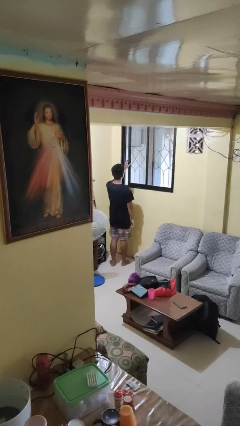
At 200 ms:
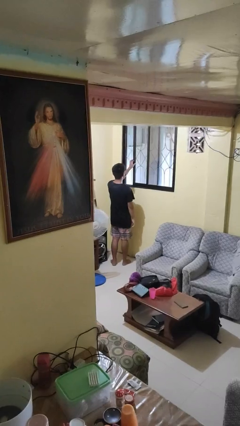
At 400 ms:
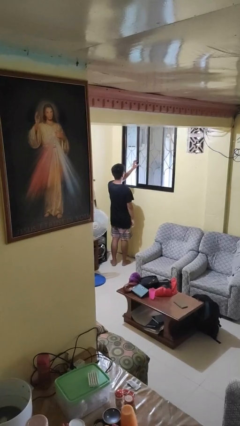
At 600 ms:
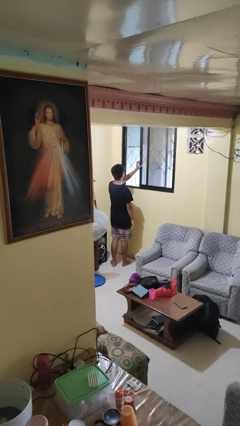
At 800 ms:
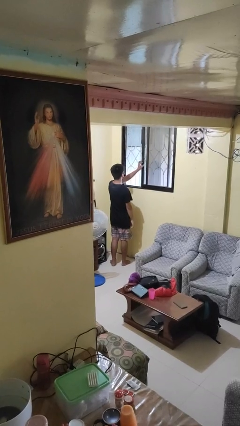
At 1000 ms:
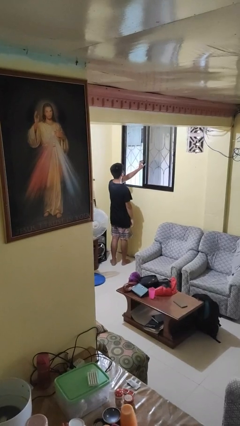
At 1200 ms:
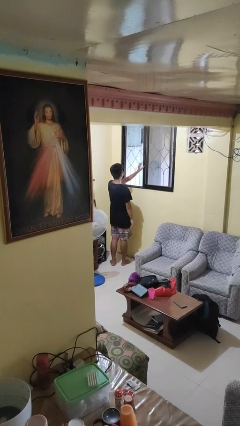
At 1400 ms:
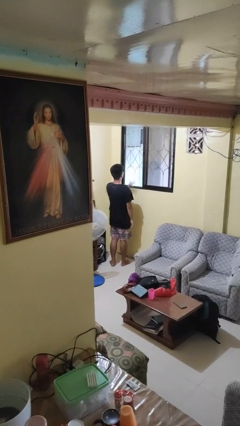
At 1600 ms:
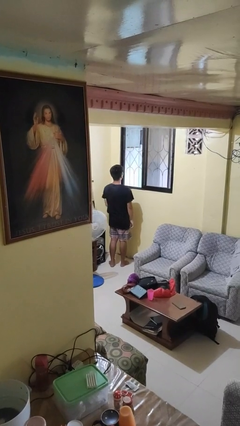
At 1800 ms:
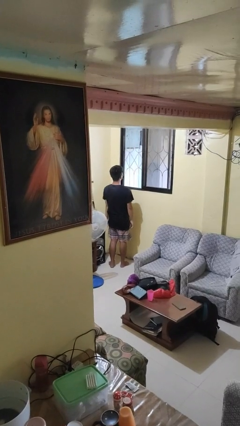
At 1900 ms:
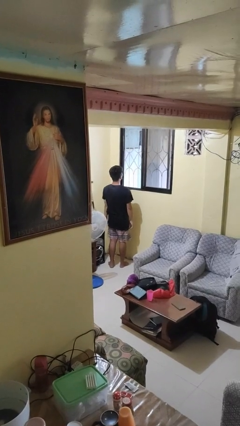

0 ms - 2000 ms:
person opens home window

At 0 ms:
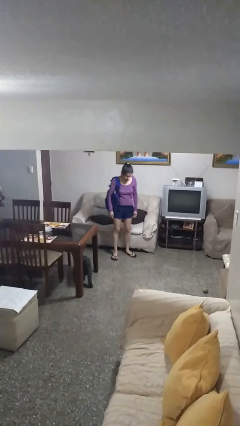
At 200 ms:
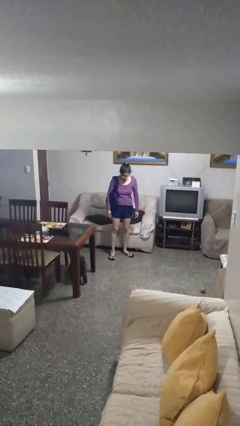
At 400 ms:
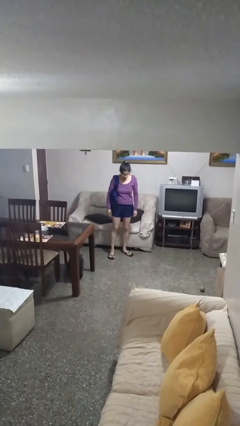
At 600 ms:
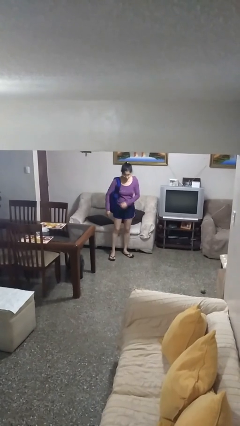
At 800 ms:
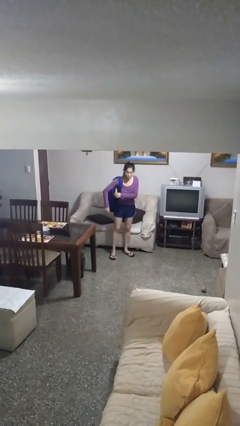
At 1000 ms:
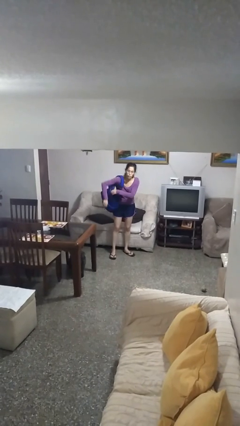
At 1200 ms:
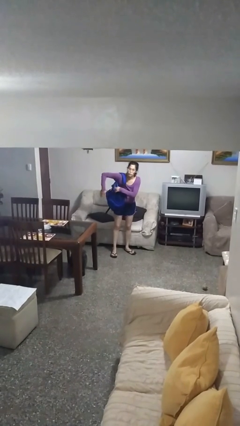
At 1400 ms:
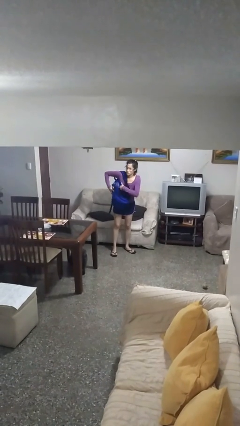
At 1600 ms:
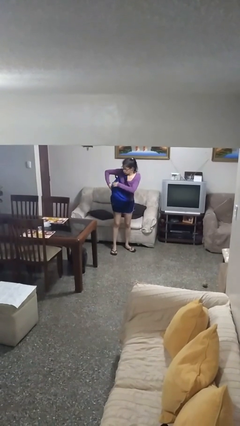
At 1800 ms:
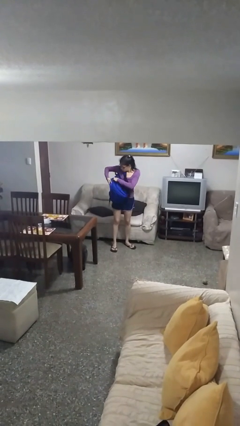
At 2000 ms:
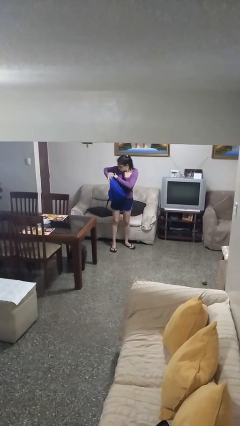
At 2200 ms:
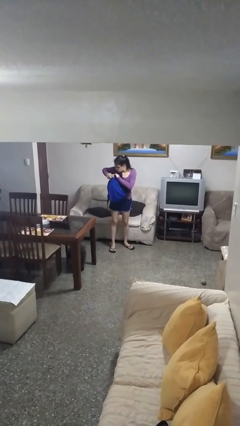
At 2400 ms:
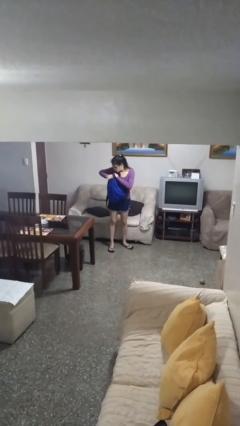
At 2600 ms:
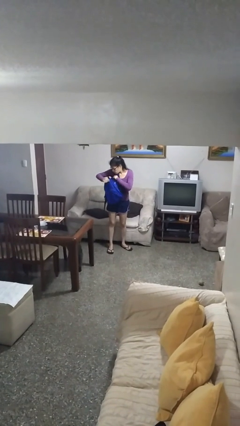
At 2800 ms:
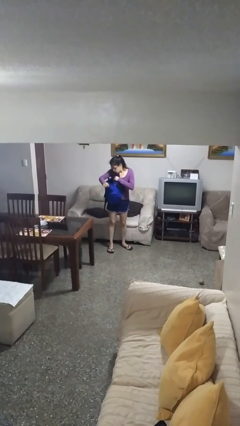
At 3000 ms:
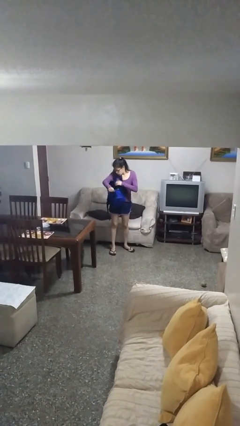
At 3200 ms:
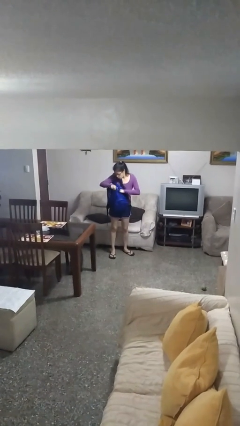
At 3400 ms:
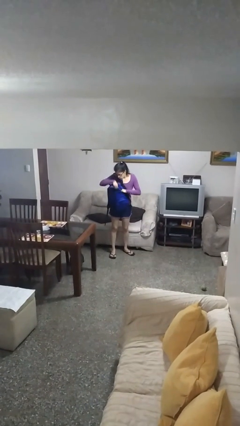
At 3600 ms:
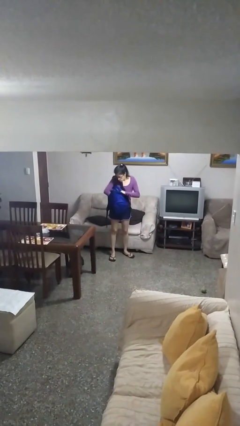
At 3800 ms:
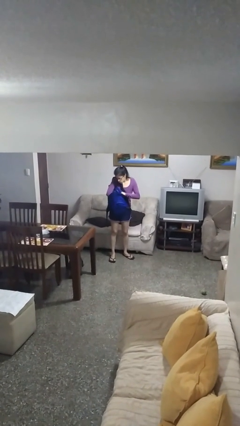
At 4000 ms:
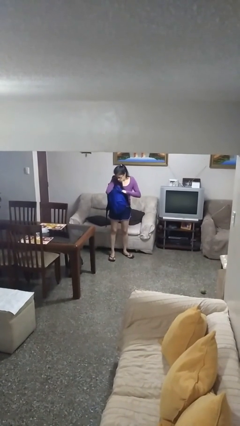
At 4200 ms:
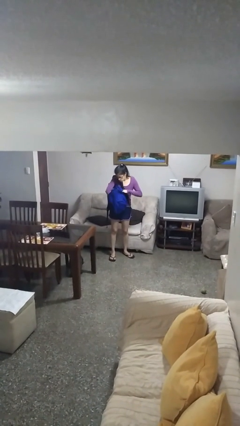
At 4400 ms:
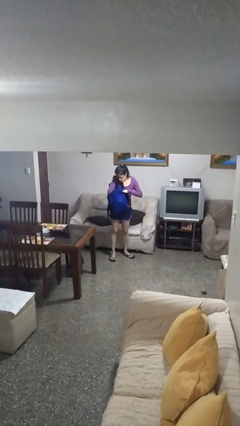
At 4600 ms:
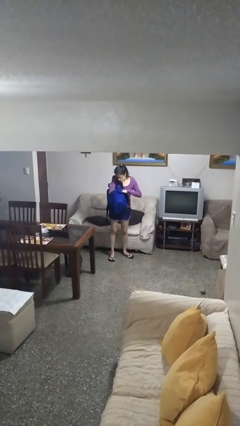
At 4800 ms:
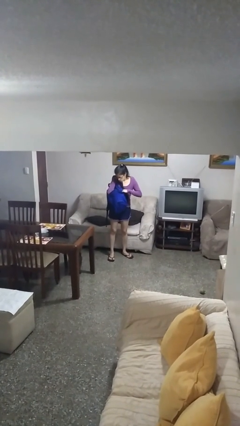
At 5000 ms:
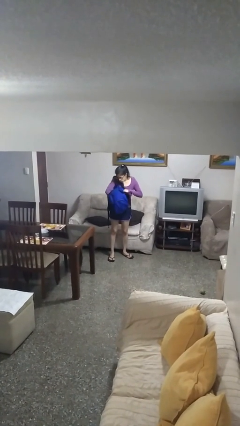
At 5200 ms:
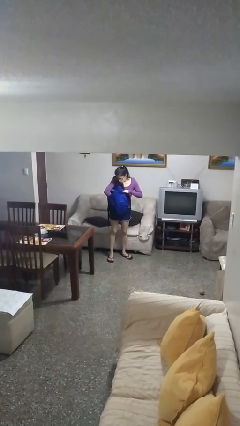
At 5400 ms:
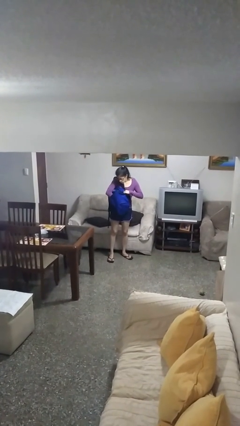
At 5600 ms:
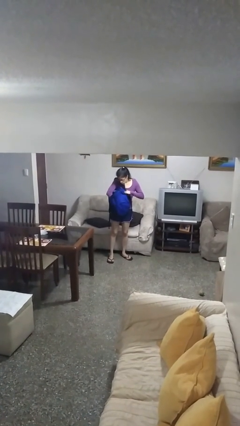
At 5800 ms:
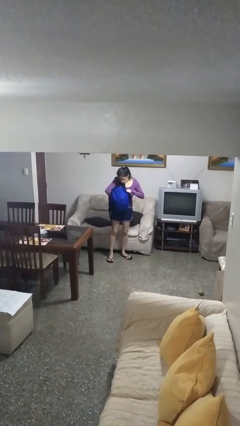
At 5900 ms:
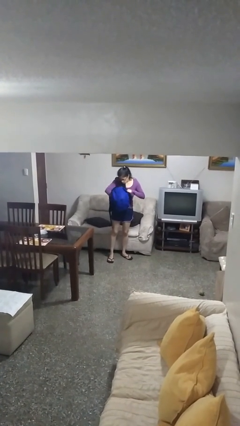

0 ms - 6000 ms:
person searches in backpack

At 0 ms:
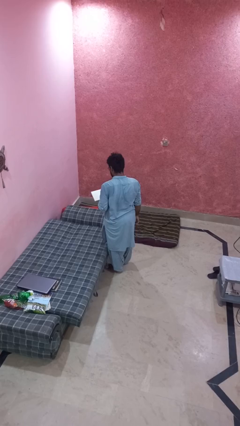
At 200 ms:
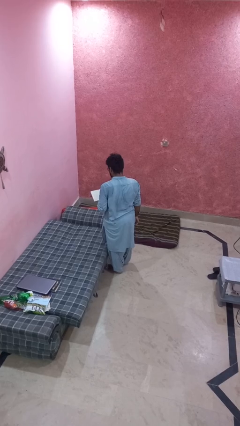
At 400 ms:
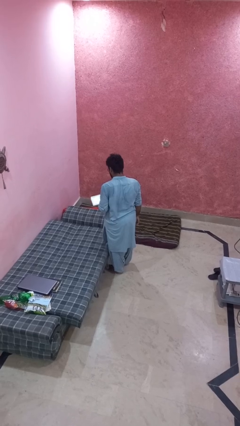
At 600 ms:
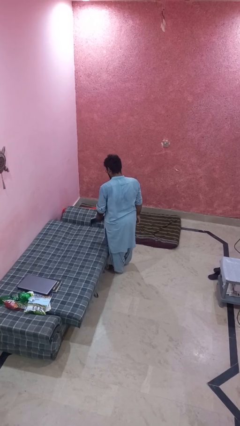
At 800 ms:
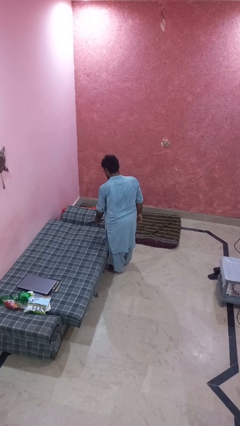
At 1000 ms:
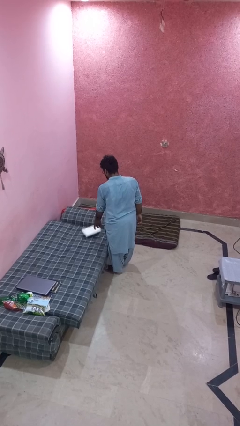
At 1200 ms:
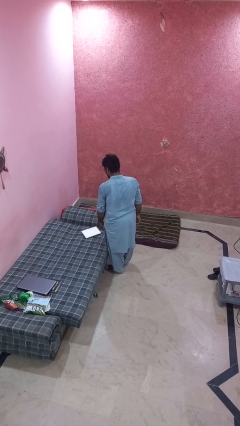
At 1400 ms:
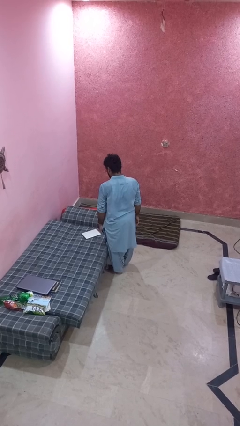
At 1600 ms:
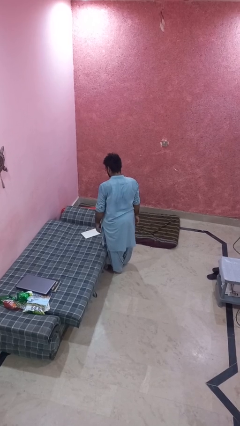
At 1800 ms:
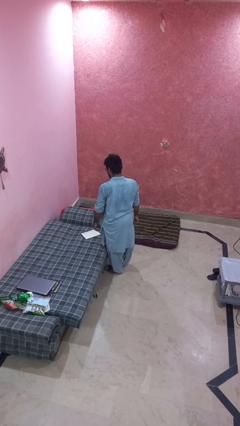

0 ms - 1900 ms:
person puts down object on bed

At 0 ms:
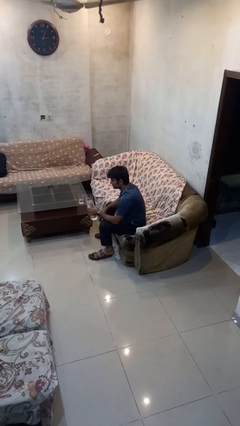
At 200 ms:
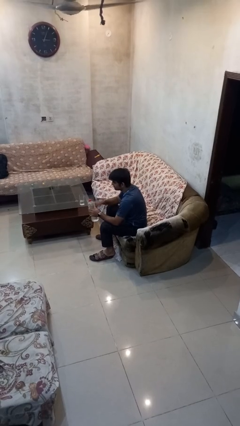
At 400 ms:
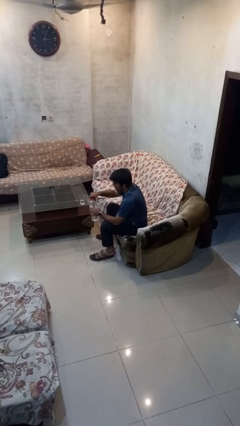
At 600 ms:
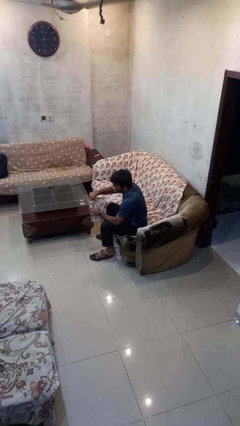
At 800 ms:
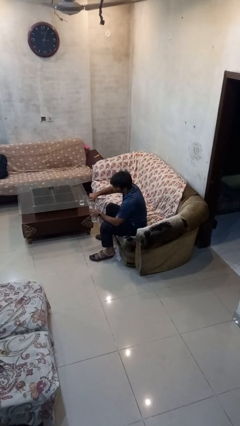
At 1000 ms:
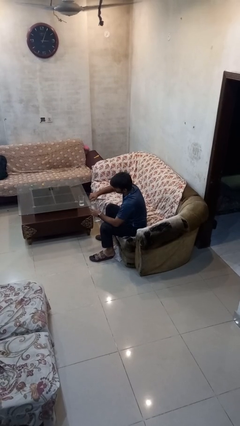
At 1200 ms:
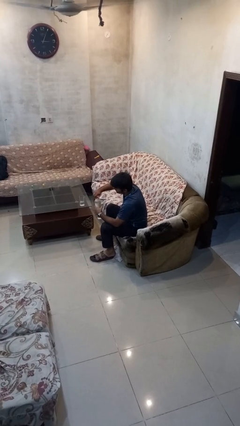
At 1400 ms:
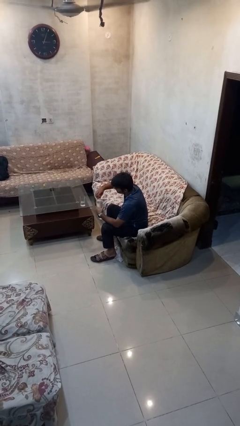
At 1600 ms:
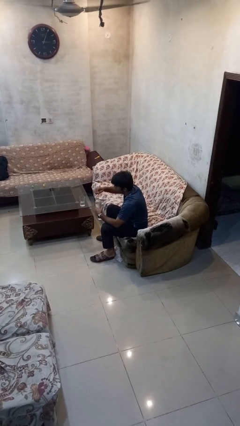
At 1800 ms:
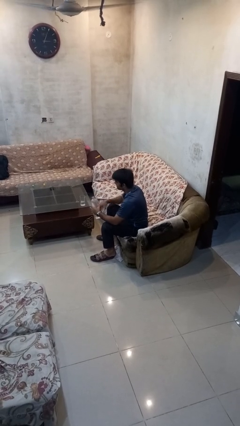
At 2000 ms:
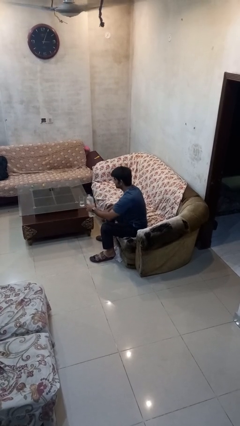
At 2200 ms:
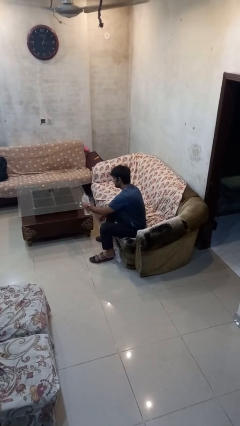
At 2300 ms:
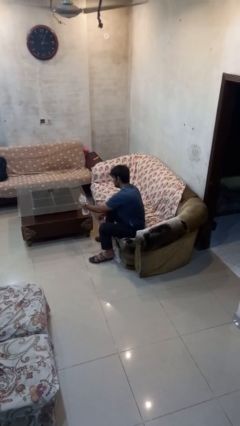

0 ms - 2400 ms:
person unscrews lid from bottle

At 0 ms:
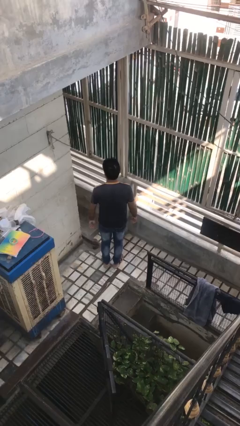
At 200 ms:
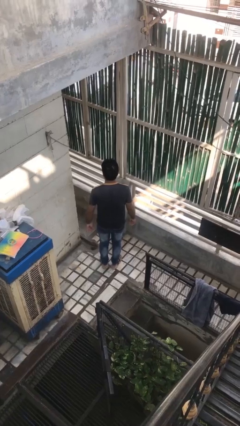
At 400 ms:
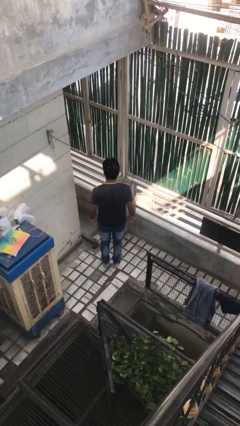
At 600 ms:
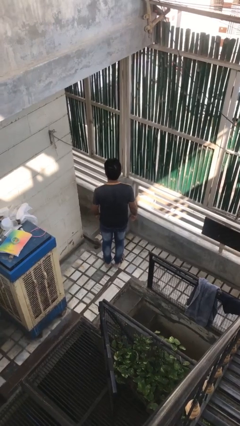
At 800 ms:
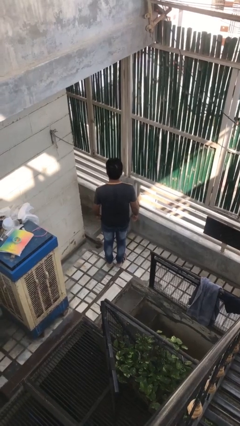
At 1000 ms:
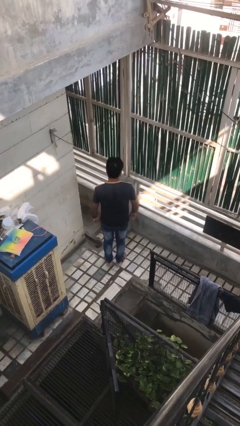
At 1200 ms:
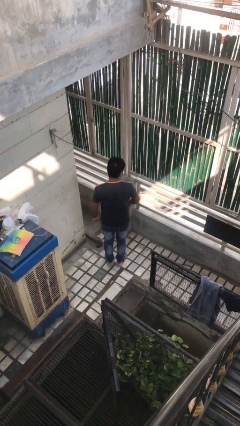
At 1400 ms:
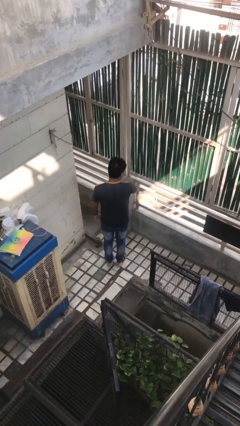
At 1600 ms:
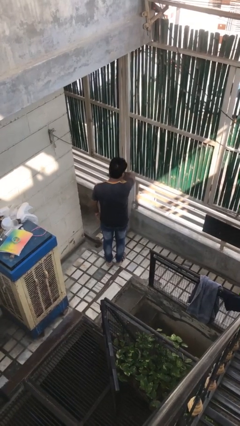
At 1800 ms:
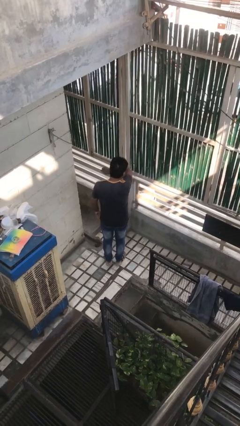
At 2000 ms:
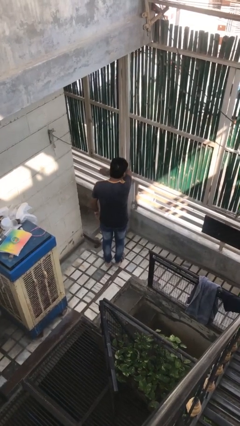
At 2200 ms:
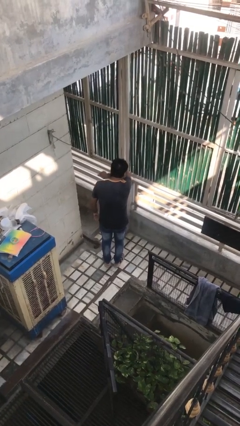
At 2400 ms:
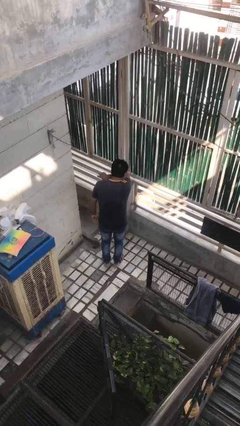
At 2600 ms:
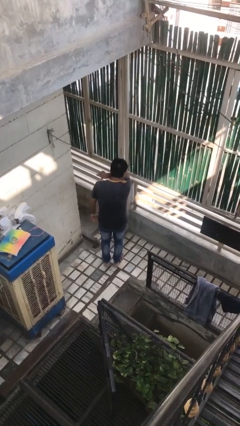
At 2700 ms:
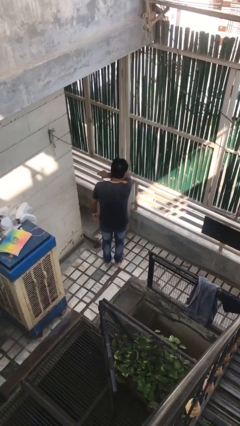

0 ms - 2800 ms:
person sneezes into arm

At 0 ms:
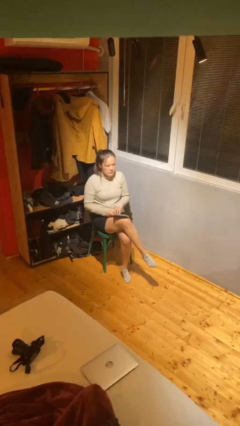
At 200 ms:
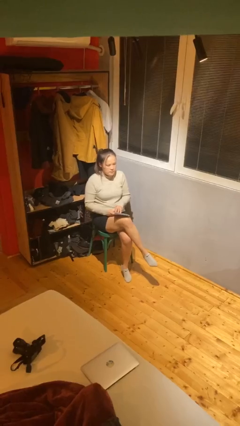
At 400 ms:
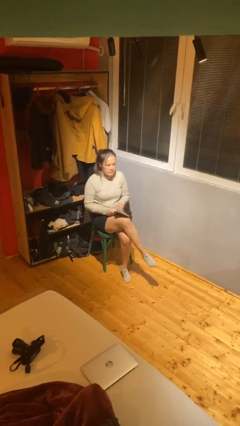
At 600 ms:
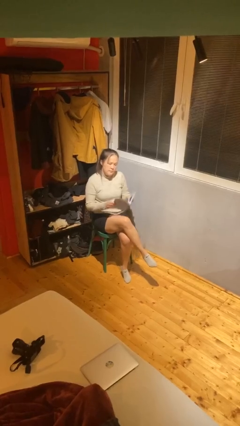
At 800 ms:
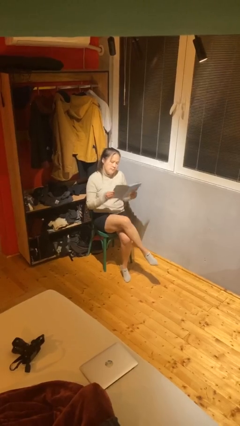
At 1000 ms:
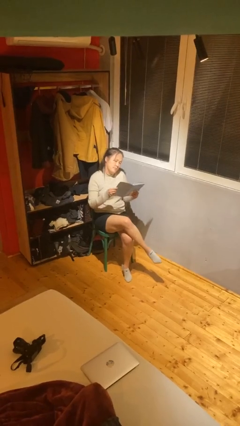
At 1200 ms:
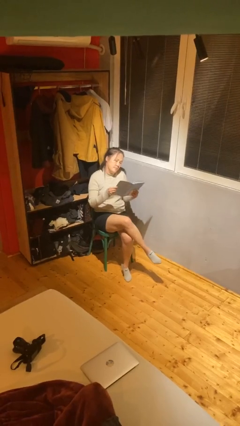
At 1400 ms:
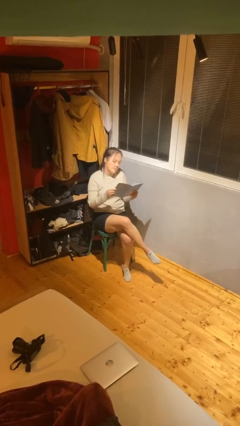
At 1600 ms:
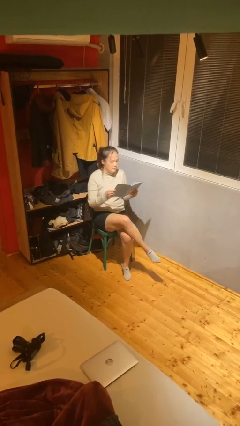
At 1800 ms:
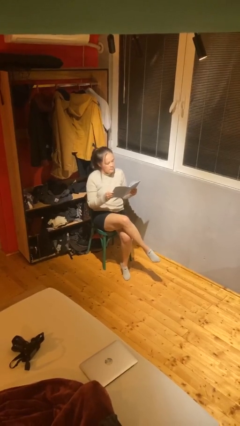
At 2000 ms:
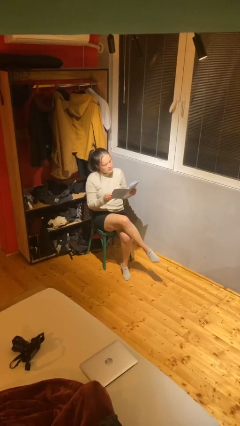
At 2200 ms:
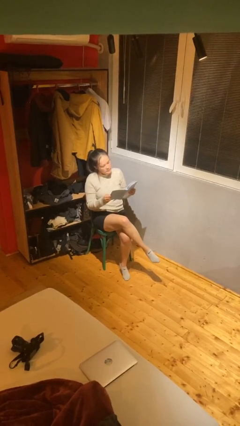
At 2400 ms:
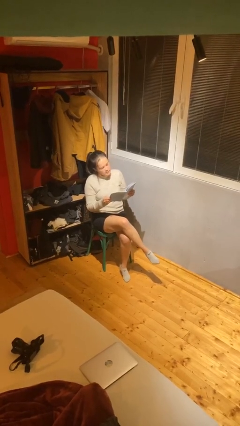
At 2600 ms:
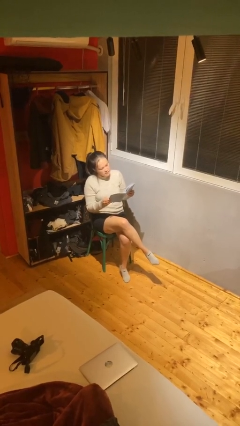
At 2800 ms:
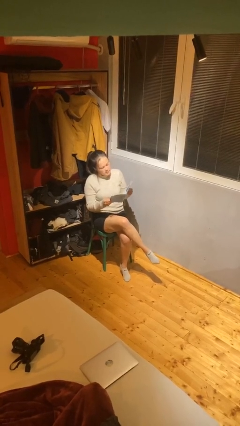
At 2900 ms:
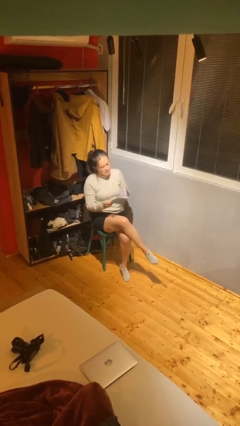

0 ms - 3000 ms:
person reads document
